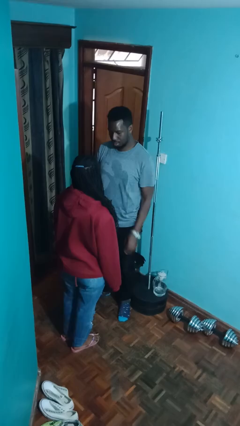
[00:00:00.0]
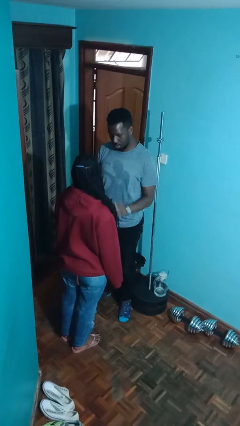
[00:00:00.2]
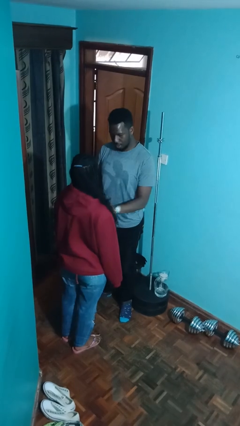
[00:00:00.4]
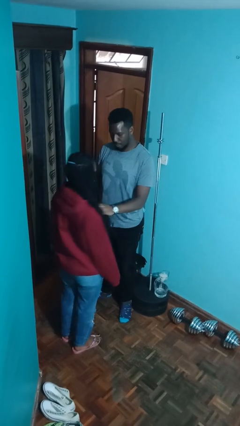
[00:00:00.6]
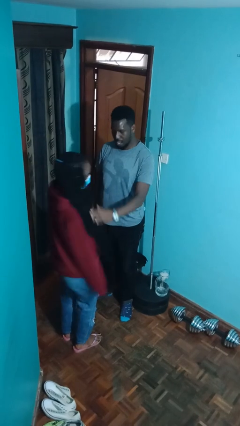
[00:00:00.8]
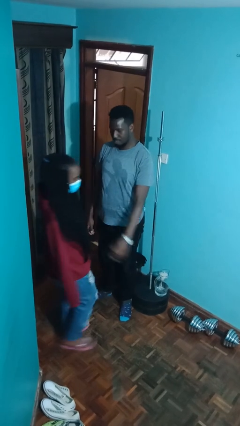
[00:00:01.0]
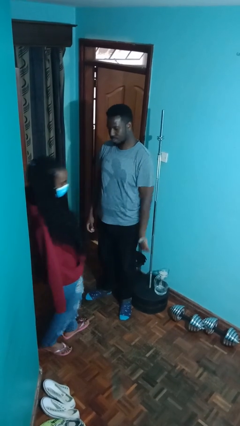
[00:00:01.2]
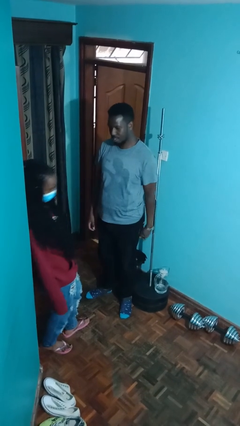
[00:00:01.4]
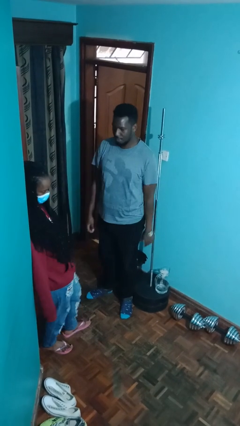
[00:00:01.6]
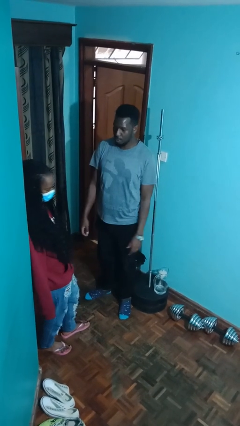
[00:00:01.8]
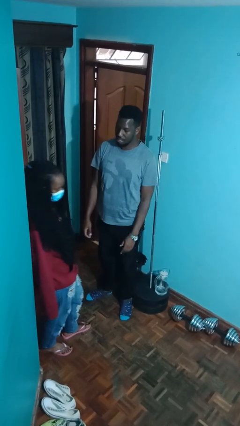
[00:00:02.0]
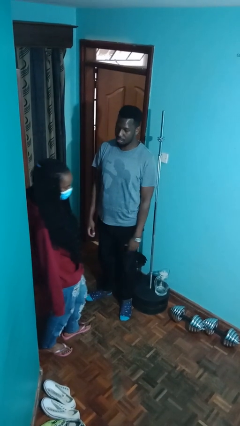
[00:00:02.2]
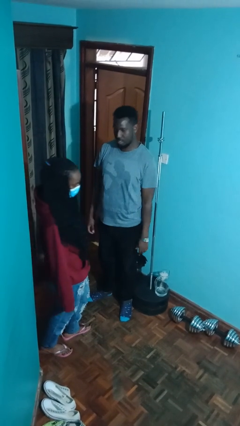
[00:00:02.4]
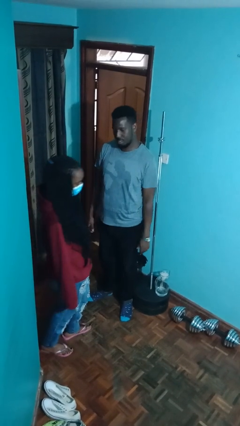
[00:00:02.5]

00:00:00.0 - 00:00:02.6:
person shoves person

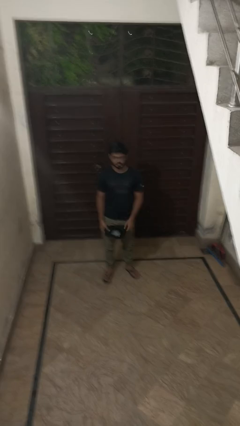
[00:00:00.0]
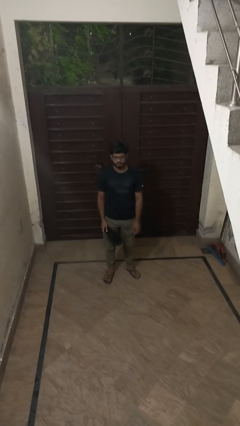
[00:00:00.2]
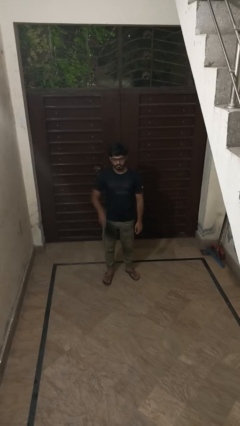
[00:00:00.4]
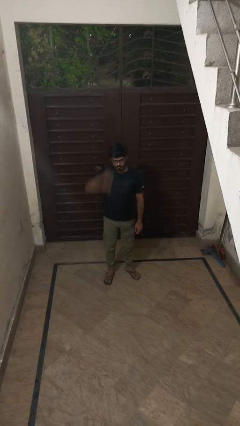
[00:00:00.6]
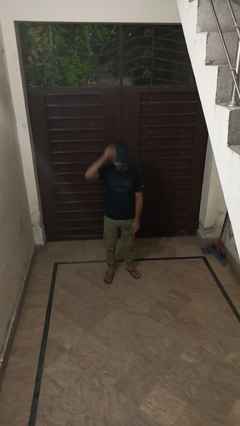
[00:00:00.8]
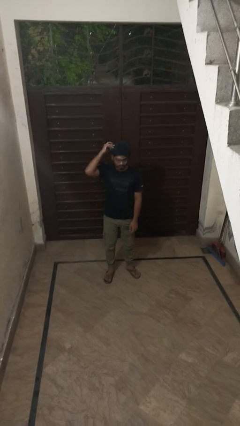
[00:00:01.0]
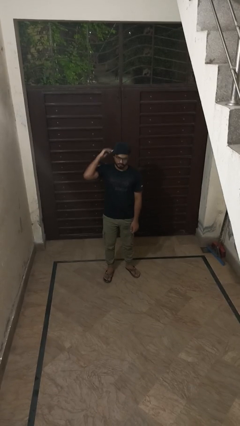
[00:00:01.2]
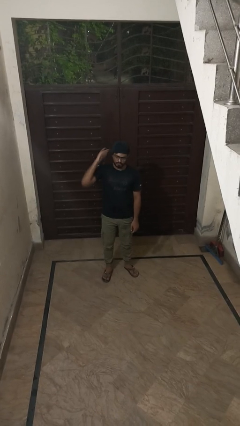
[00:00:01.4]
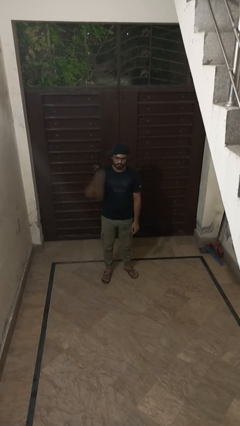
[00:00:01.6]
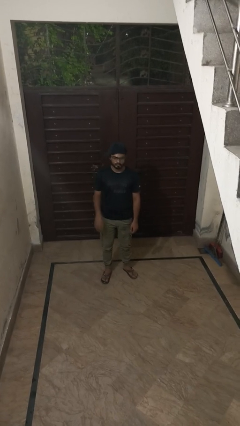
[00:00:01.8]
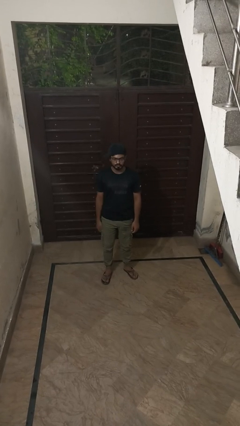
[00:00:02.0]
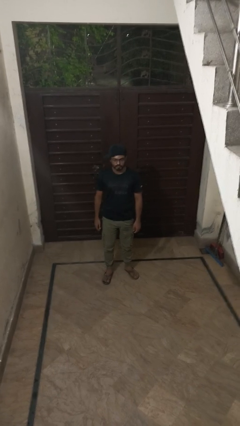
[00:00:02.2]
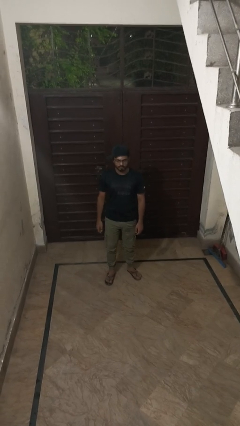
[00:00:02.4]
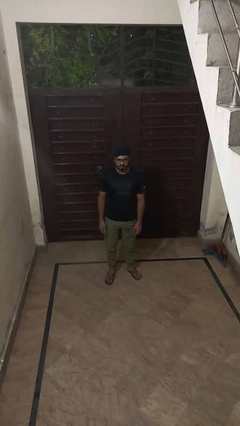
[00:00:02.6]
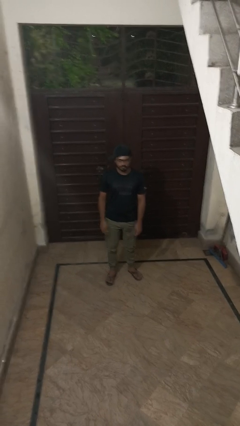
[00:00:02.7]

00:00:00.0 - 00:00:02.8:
person puts on hat

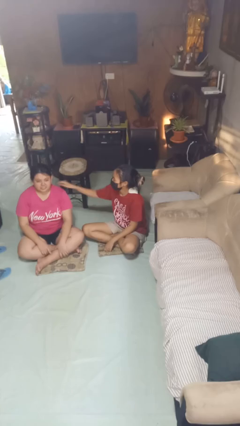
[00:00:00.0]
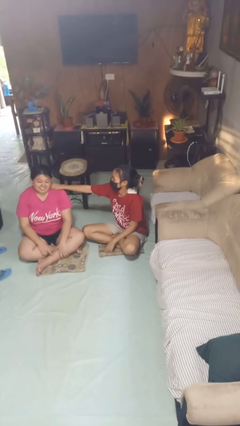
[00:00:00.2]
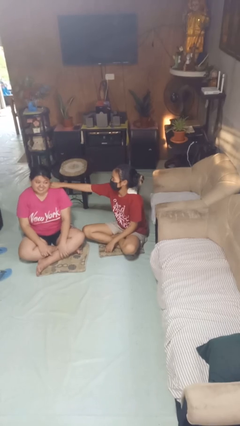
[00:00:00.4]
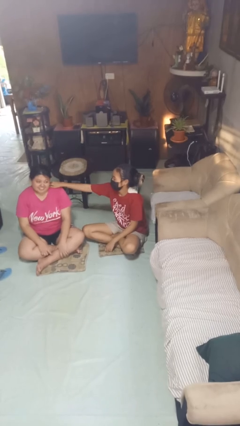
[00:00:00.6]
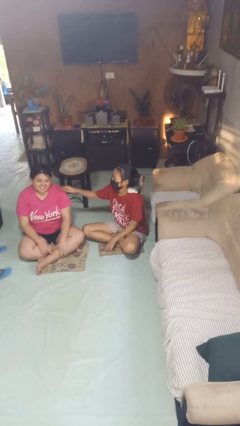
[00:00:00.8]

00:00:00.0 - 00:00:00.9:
person tickles person

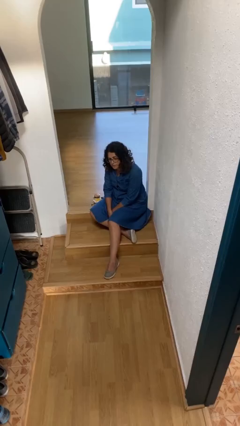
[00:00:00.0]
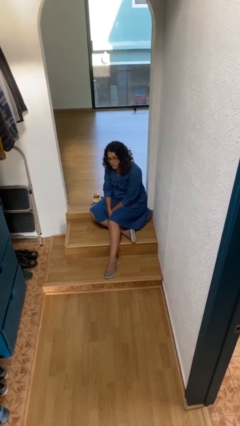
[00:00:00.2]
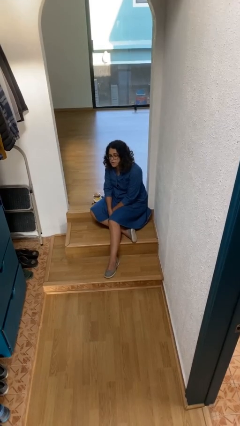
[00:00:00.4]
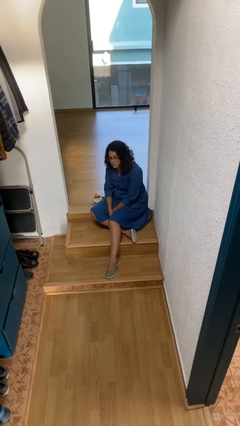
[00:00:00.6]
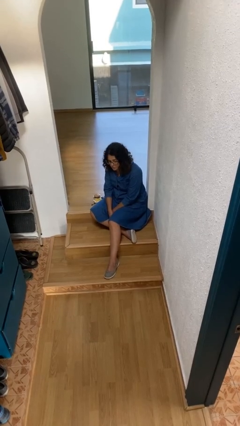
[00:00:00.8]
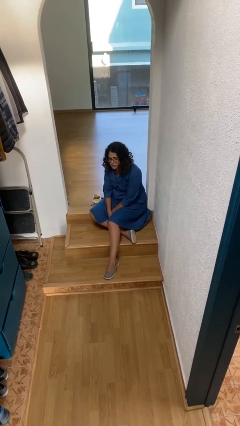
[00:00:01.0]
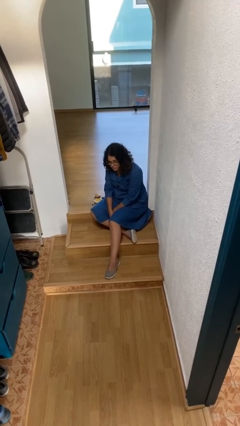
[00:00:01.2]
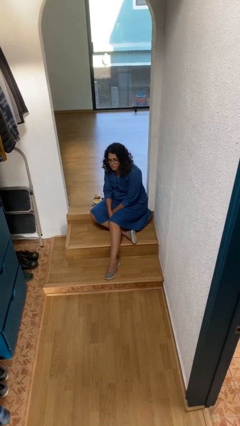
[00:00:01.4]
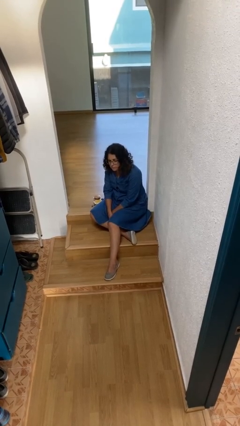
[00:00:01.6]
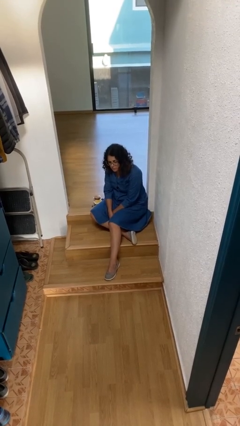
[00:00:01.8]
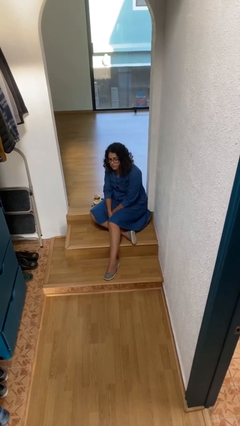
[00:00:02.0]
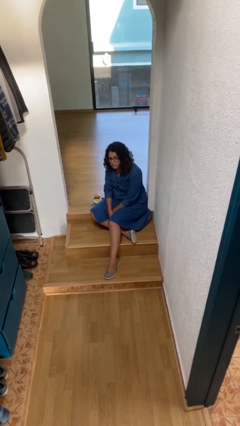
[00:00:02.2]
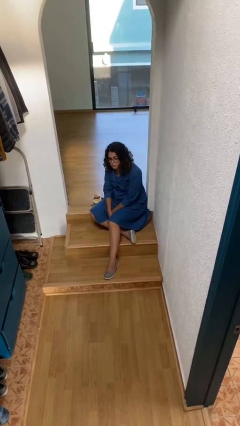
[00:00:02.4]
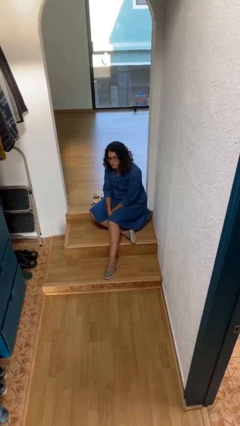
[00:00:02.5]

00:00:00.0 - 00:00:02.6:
person nods head

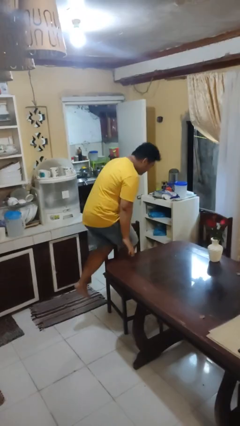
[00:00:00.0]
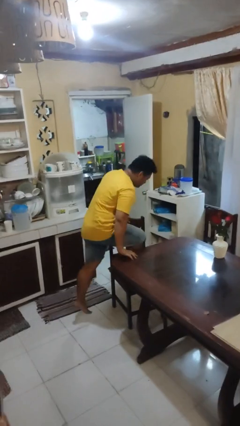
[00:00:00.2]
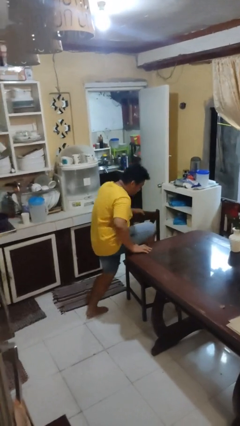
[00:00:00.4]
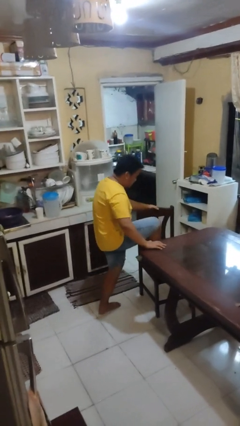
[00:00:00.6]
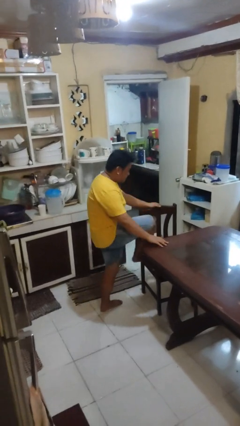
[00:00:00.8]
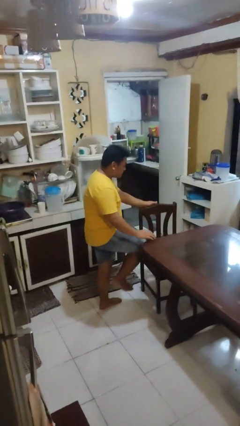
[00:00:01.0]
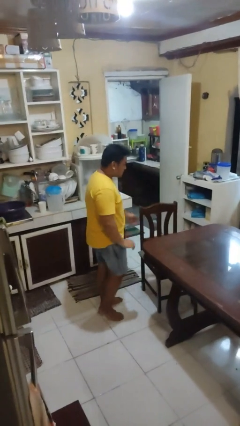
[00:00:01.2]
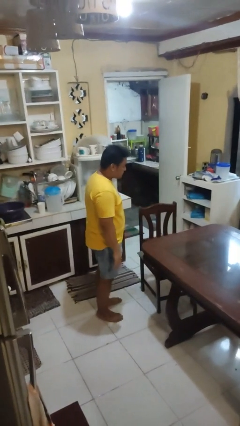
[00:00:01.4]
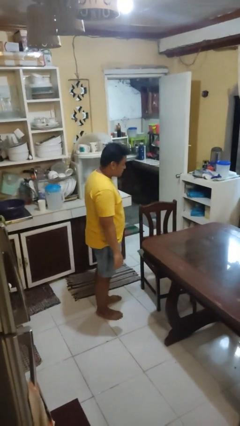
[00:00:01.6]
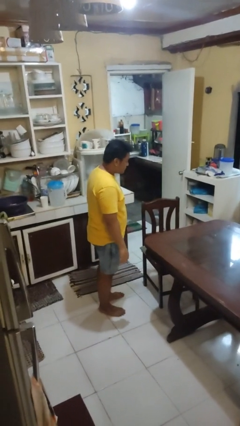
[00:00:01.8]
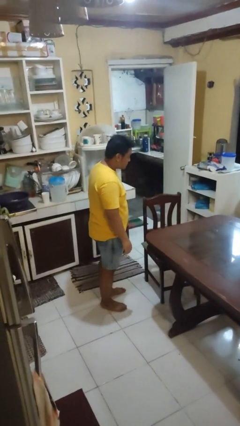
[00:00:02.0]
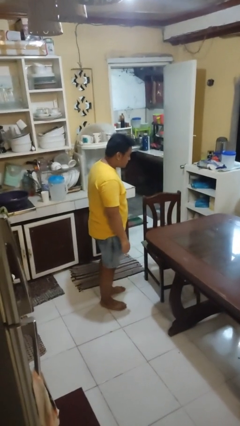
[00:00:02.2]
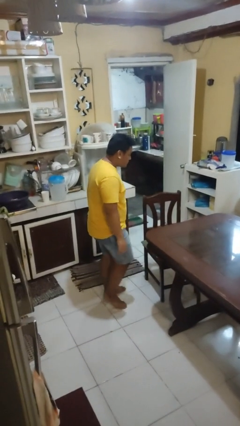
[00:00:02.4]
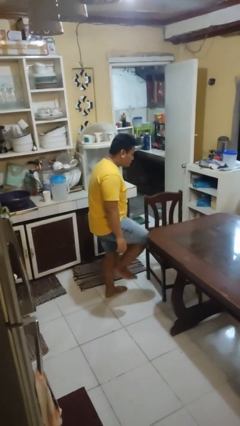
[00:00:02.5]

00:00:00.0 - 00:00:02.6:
person climbs off chair

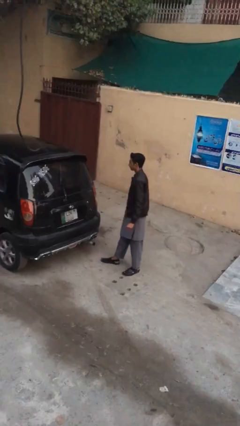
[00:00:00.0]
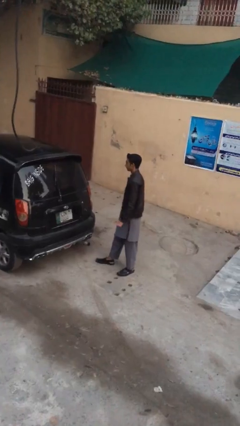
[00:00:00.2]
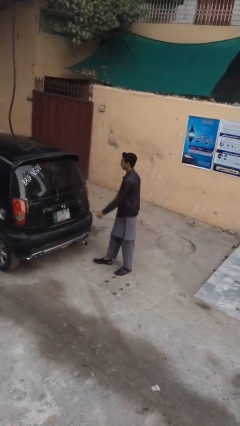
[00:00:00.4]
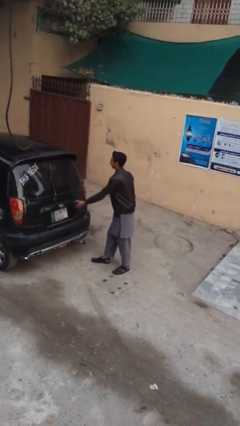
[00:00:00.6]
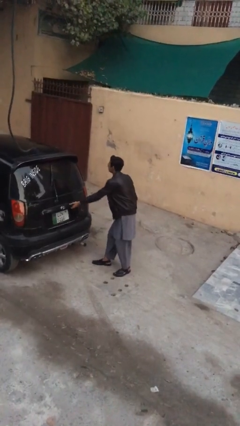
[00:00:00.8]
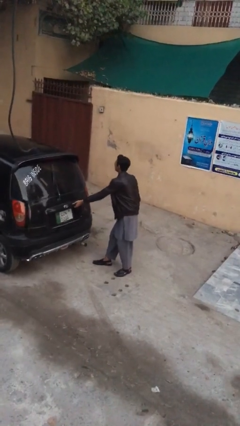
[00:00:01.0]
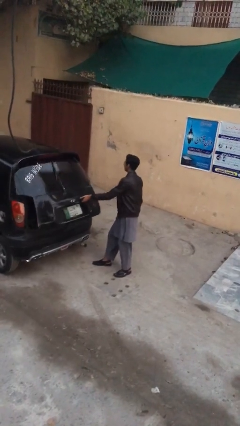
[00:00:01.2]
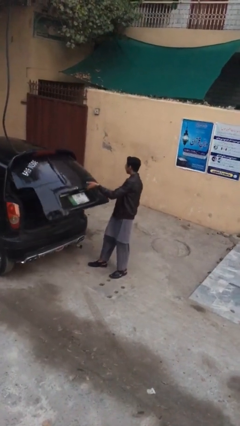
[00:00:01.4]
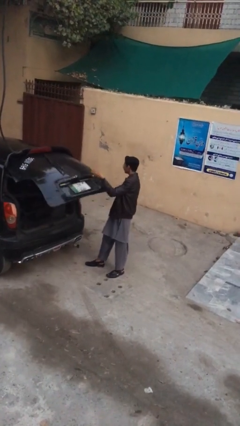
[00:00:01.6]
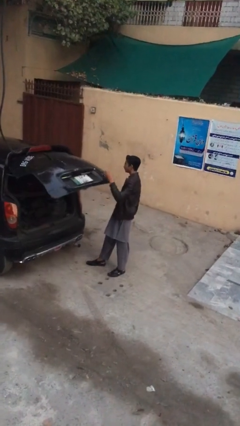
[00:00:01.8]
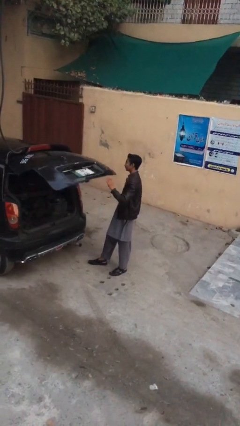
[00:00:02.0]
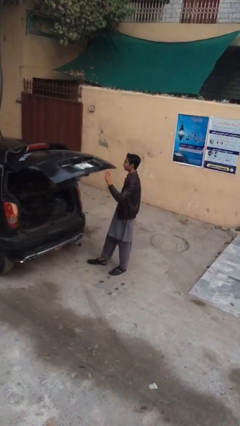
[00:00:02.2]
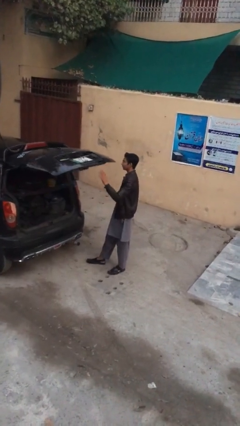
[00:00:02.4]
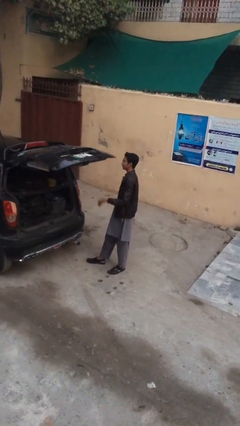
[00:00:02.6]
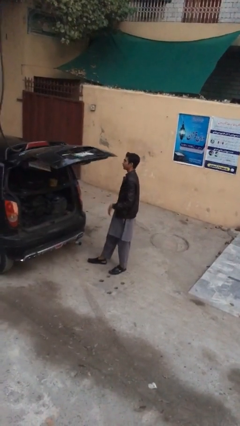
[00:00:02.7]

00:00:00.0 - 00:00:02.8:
person opens car trunk

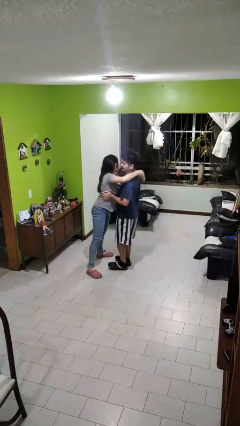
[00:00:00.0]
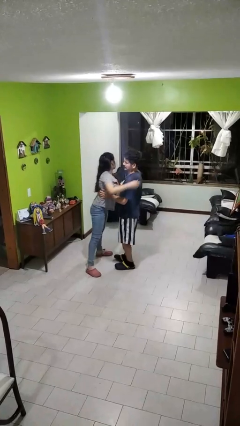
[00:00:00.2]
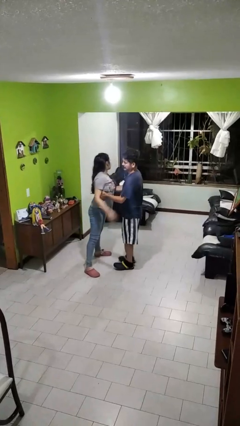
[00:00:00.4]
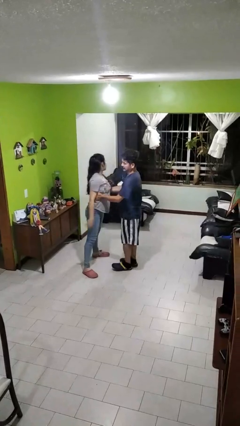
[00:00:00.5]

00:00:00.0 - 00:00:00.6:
person puts down person

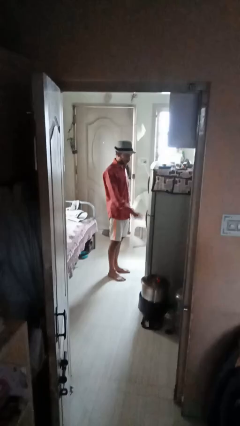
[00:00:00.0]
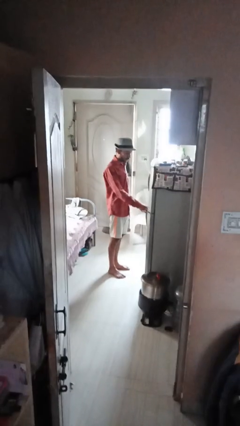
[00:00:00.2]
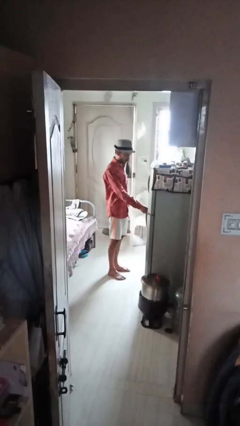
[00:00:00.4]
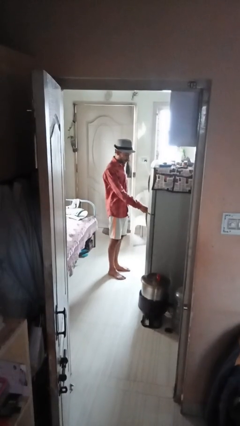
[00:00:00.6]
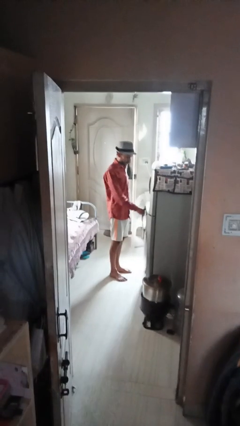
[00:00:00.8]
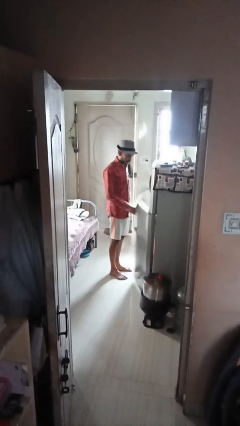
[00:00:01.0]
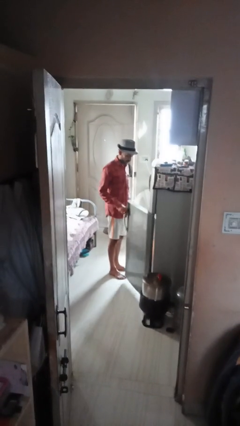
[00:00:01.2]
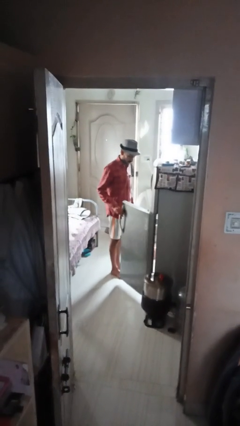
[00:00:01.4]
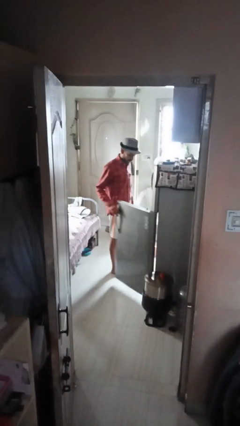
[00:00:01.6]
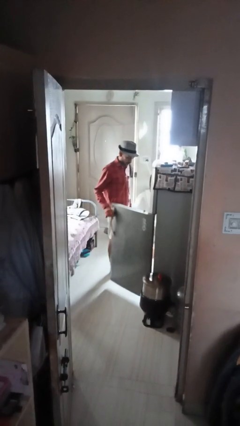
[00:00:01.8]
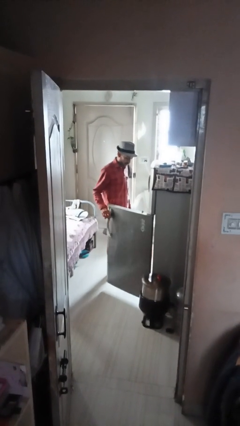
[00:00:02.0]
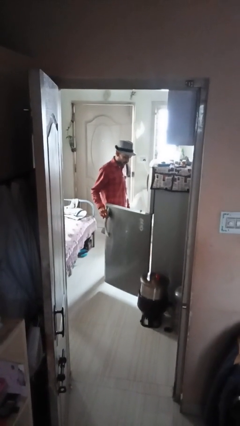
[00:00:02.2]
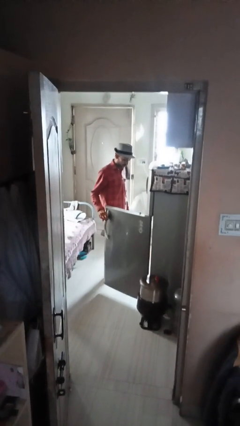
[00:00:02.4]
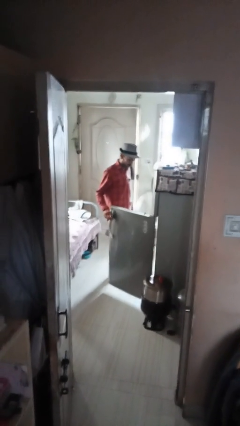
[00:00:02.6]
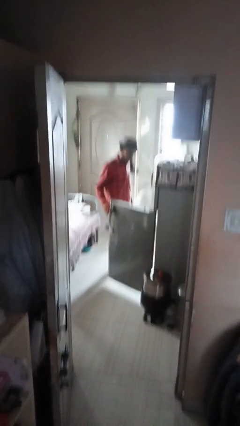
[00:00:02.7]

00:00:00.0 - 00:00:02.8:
person opens refrigerator
